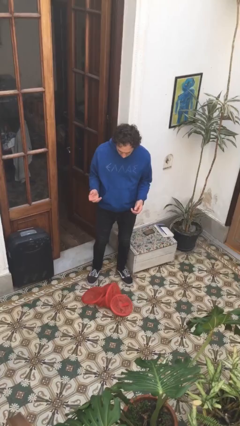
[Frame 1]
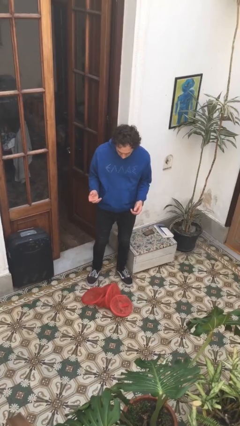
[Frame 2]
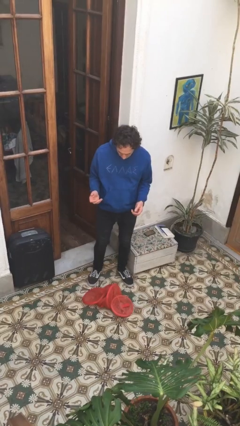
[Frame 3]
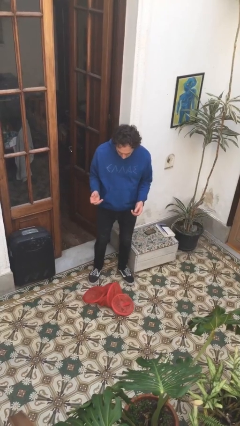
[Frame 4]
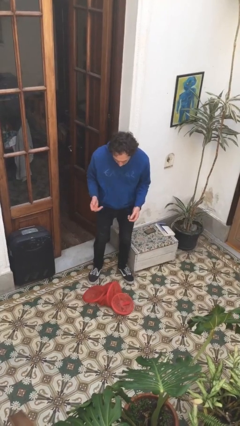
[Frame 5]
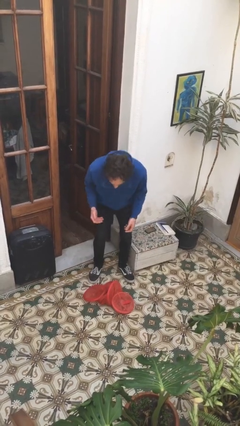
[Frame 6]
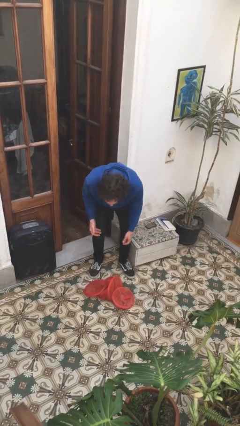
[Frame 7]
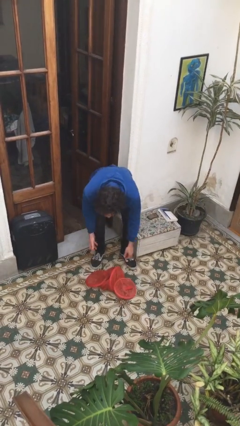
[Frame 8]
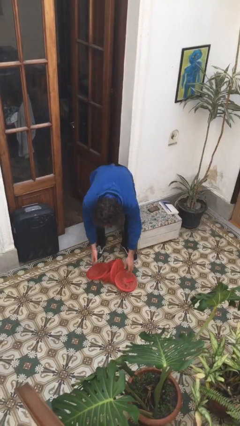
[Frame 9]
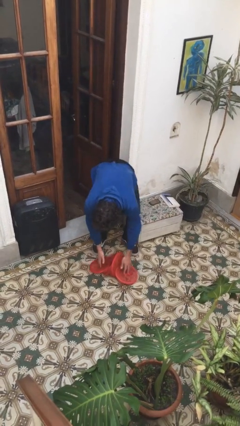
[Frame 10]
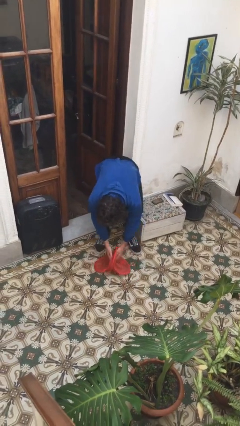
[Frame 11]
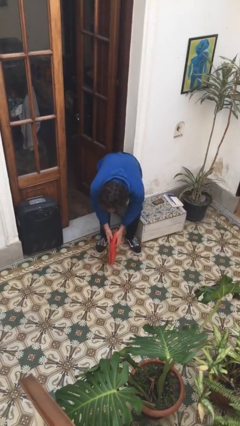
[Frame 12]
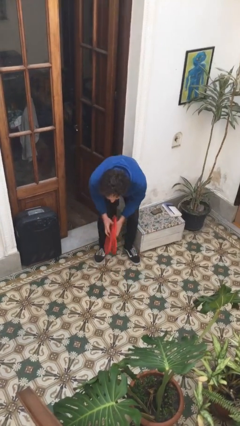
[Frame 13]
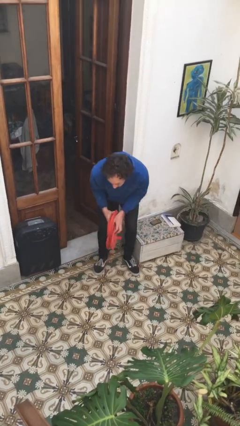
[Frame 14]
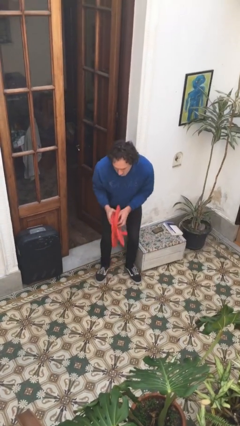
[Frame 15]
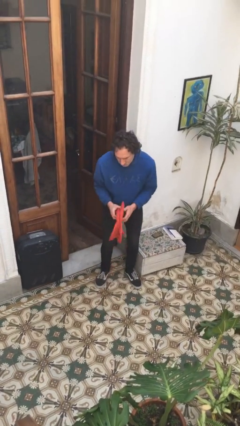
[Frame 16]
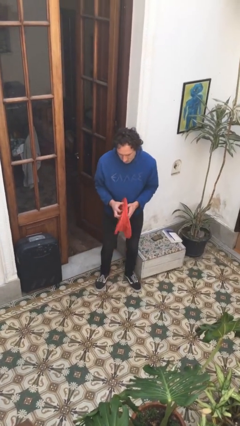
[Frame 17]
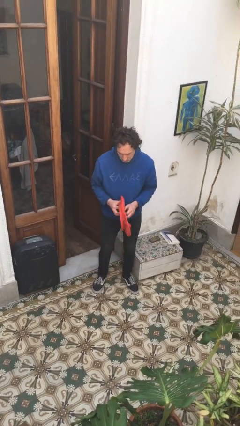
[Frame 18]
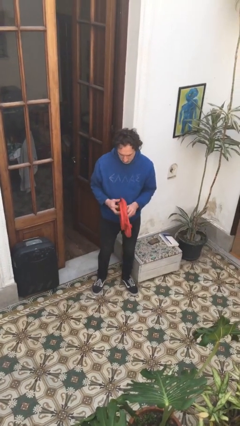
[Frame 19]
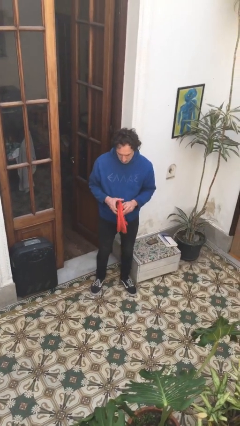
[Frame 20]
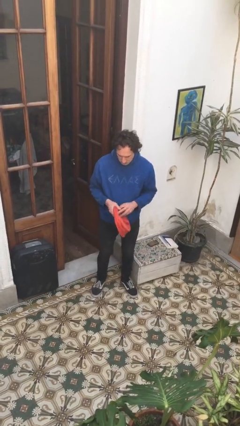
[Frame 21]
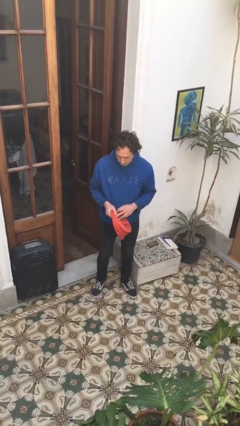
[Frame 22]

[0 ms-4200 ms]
person picks up object from floor

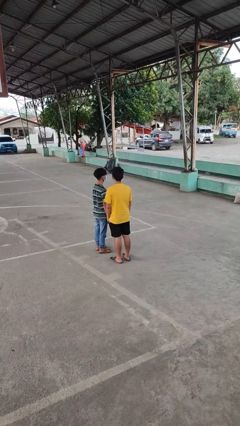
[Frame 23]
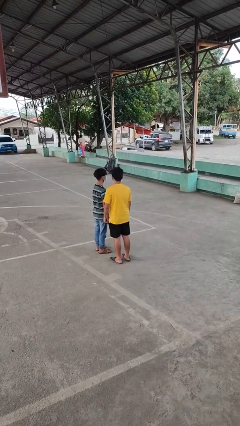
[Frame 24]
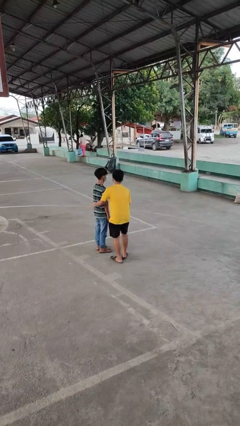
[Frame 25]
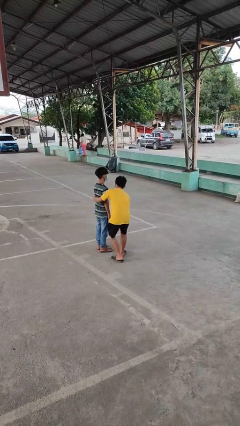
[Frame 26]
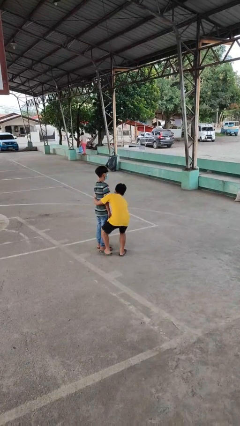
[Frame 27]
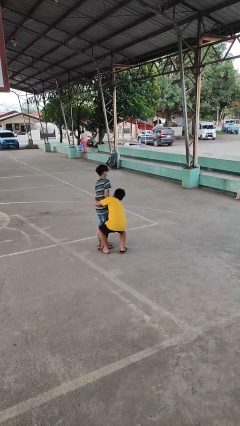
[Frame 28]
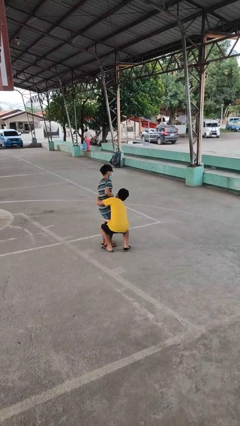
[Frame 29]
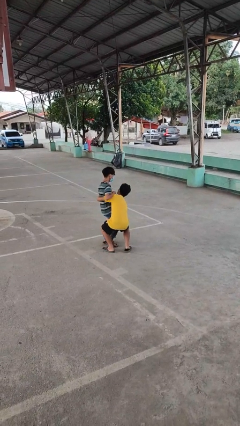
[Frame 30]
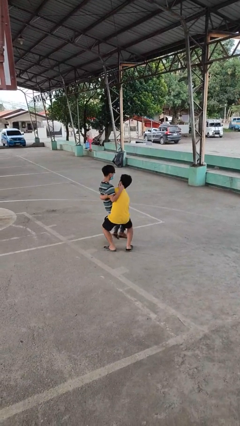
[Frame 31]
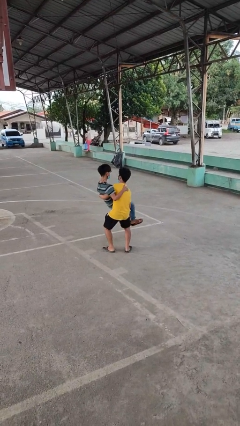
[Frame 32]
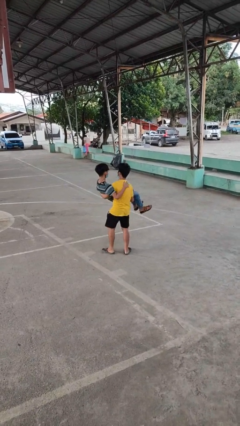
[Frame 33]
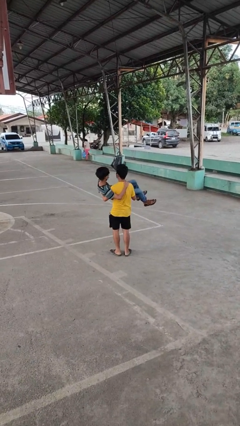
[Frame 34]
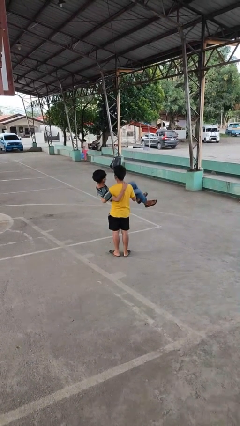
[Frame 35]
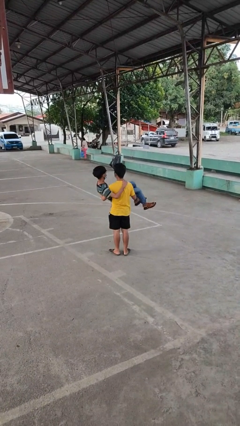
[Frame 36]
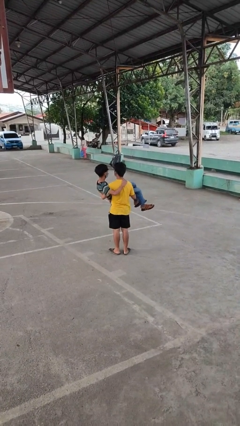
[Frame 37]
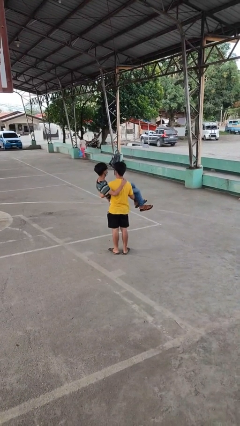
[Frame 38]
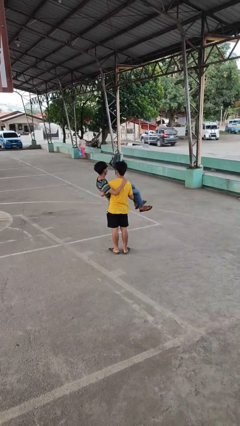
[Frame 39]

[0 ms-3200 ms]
person picks up person

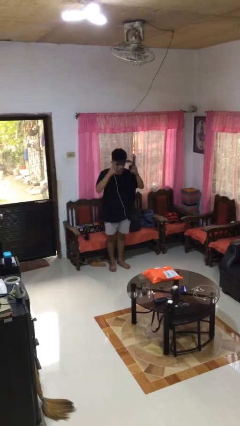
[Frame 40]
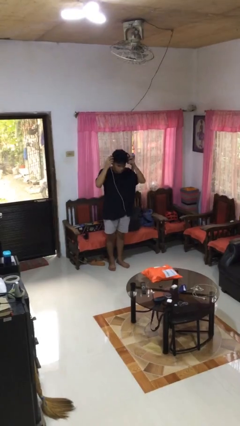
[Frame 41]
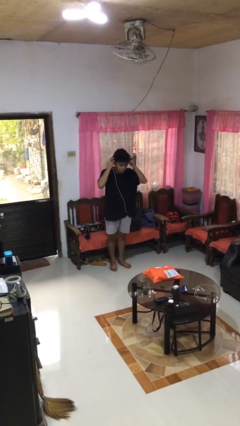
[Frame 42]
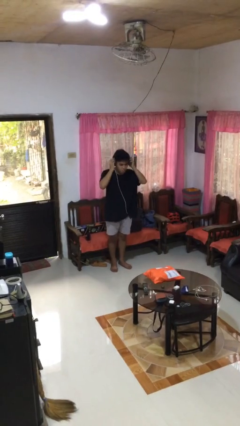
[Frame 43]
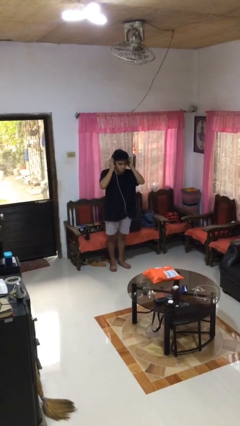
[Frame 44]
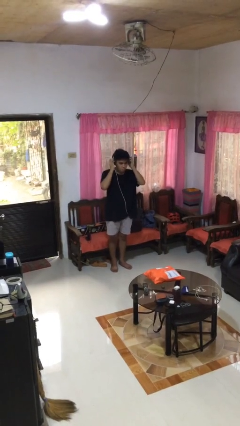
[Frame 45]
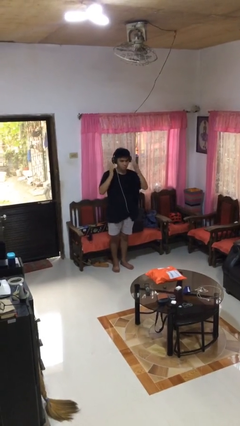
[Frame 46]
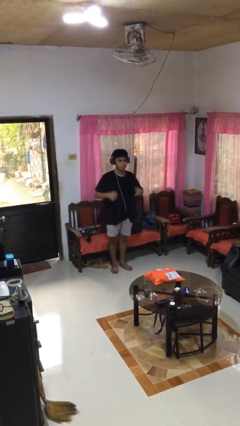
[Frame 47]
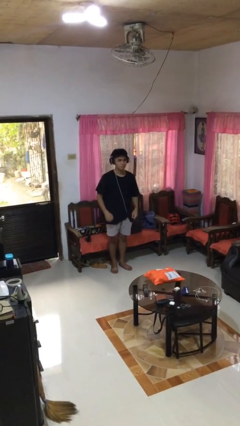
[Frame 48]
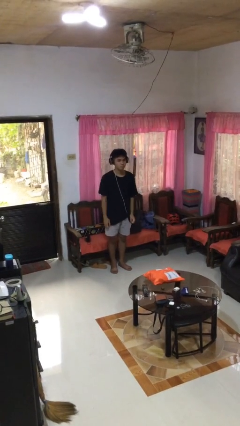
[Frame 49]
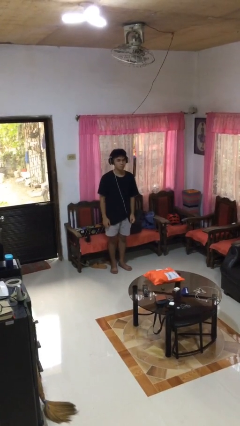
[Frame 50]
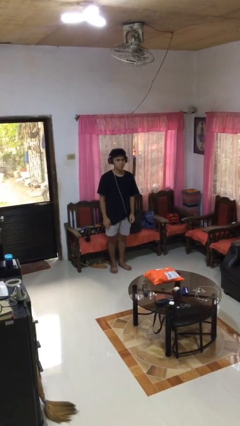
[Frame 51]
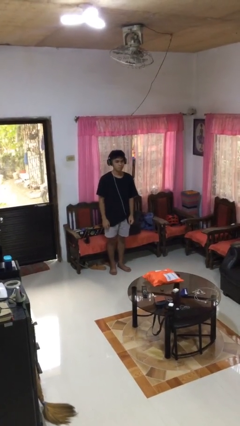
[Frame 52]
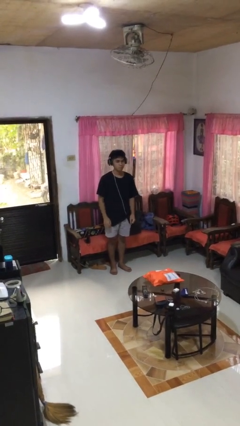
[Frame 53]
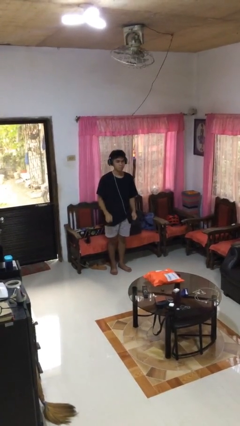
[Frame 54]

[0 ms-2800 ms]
person puts on headphones

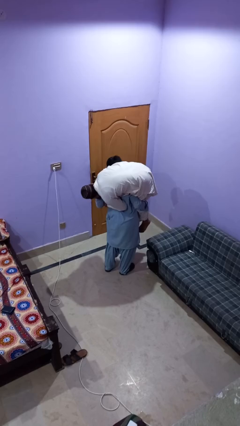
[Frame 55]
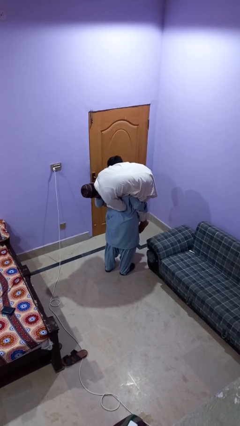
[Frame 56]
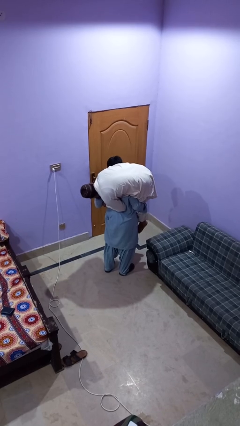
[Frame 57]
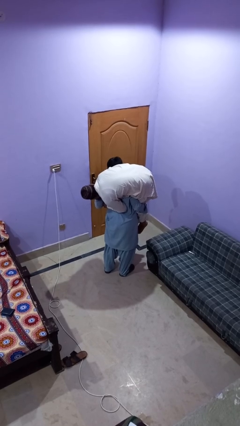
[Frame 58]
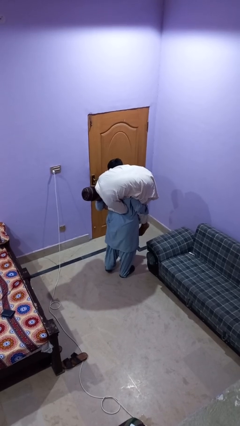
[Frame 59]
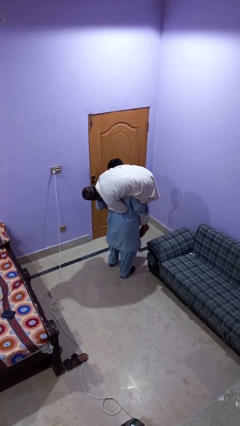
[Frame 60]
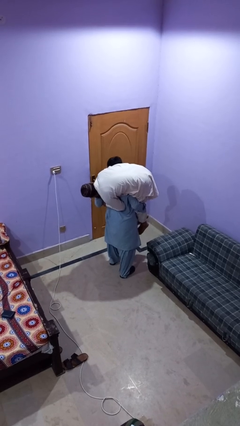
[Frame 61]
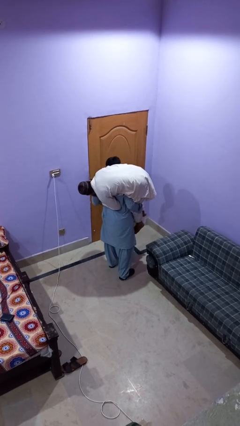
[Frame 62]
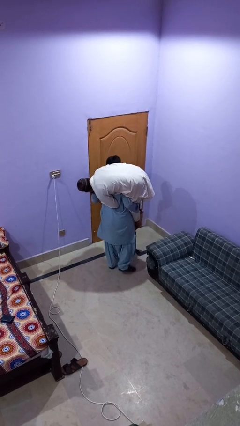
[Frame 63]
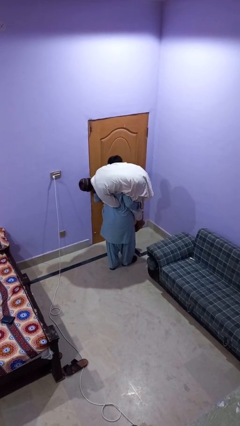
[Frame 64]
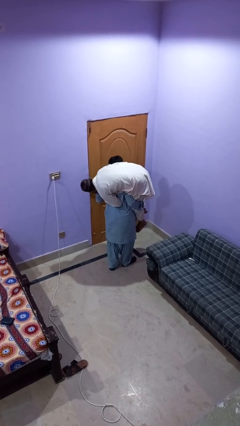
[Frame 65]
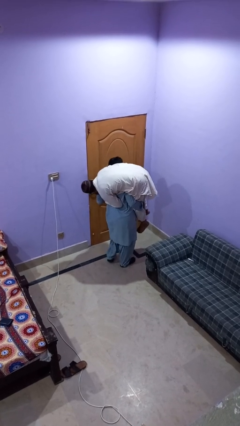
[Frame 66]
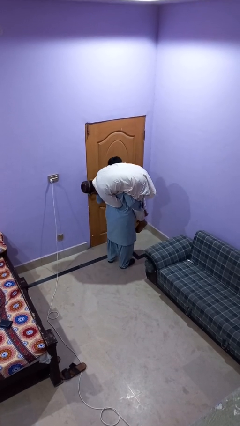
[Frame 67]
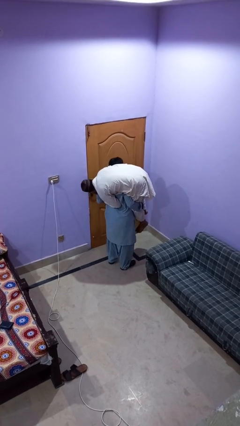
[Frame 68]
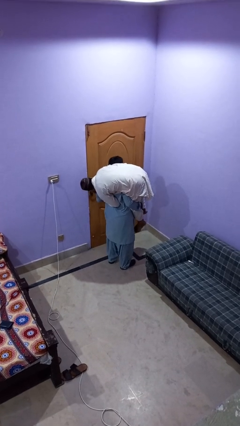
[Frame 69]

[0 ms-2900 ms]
person carries person on shoulders

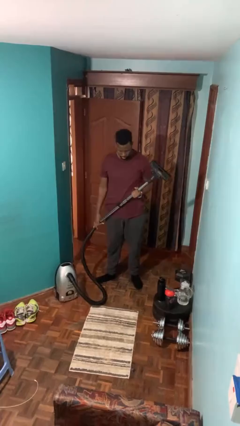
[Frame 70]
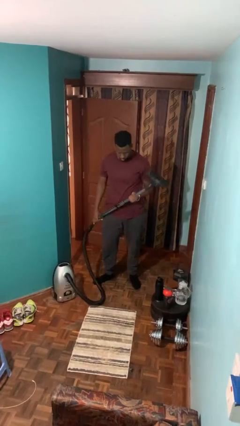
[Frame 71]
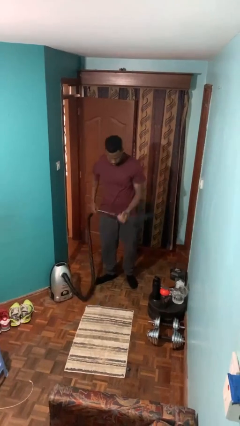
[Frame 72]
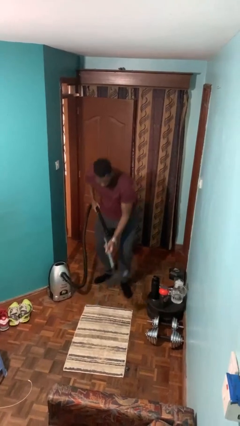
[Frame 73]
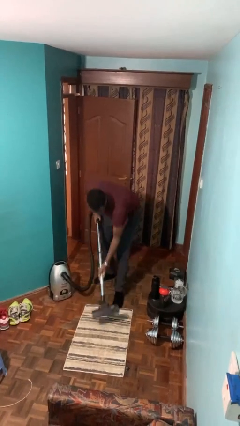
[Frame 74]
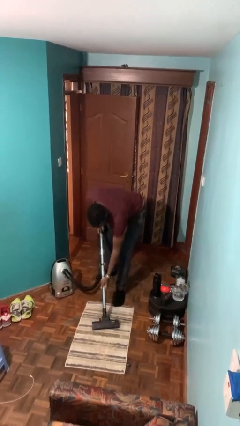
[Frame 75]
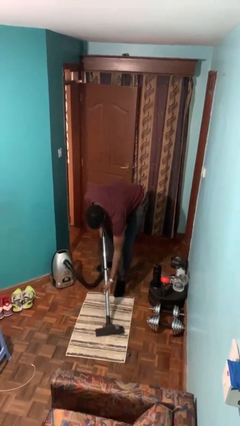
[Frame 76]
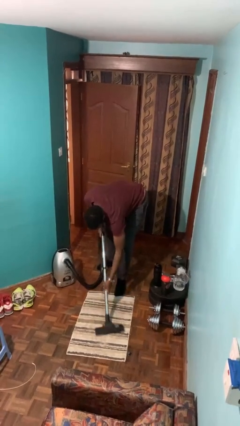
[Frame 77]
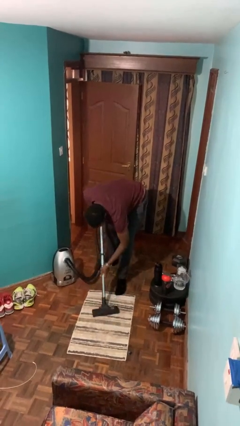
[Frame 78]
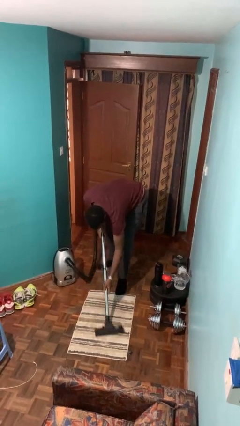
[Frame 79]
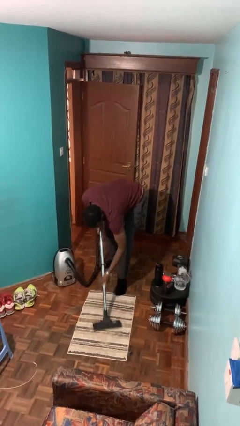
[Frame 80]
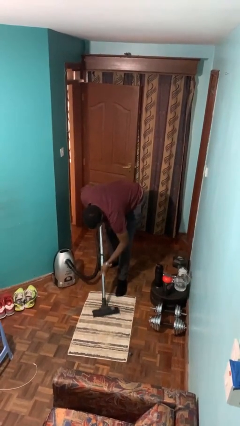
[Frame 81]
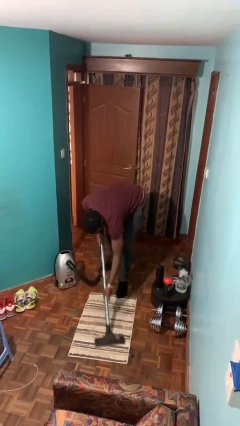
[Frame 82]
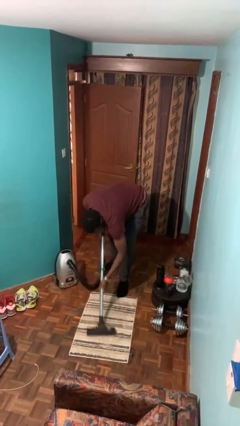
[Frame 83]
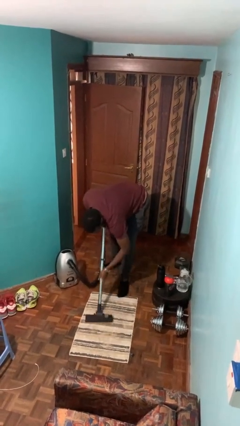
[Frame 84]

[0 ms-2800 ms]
person vacuums carpet

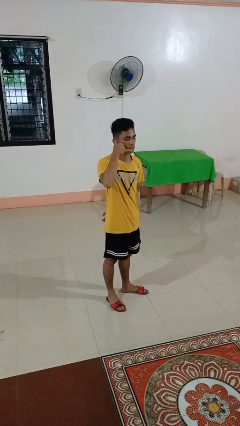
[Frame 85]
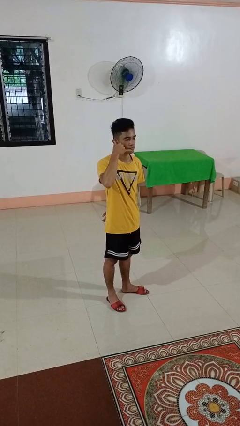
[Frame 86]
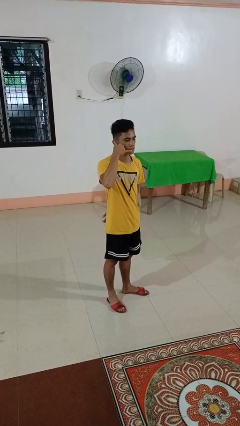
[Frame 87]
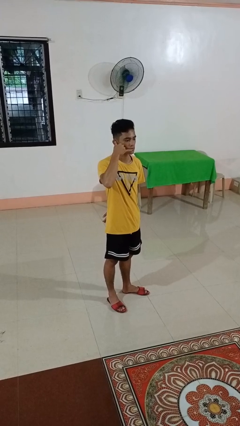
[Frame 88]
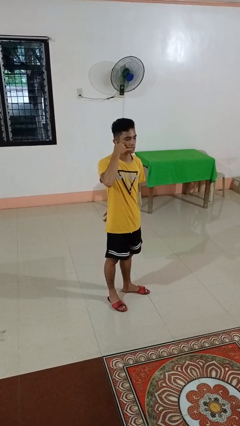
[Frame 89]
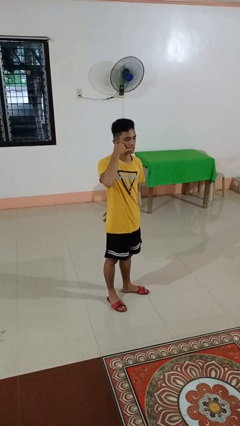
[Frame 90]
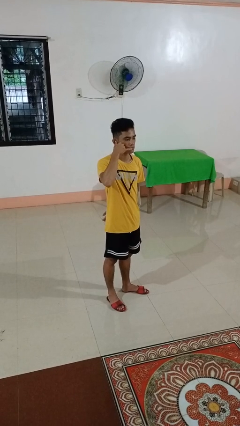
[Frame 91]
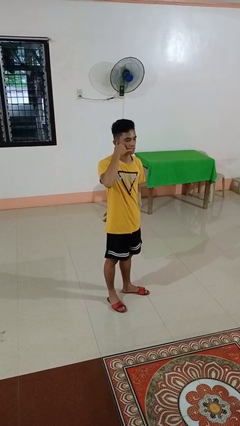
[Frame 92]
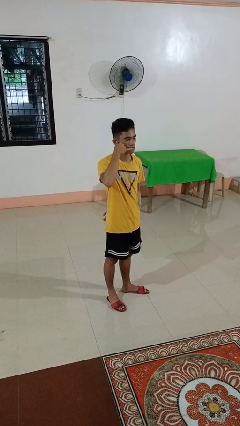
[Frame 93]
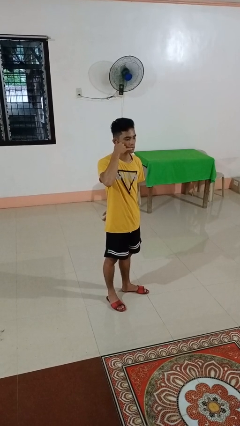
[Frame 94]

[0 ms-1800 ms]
person gestures call me
